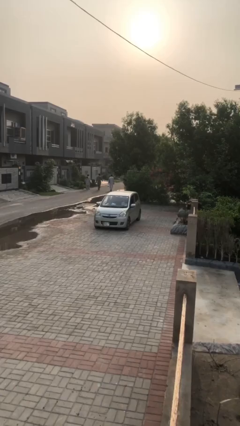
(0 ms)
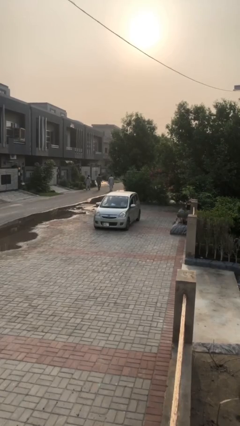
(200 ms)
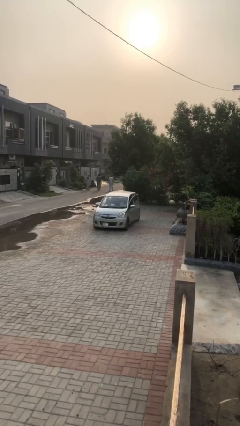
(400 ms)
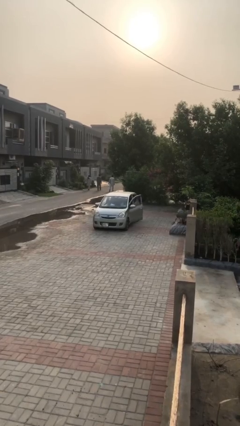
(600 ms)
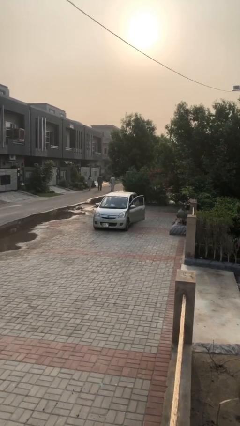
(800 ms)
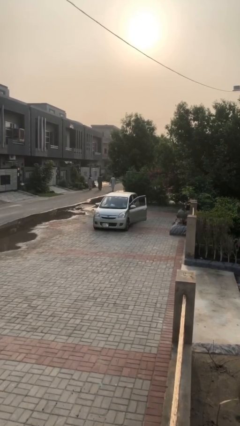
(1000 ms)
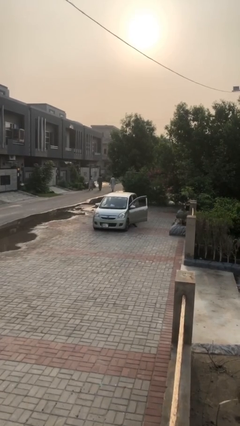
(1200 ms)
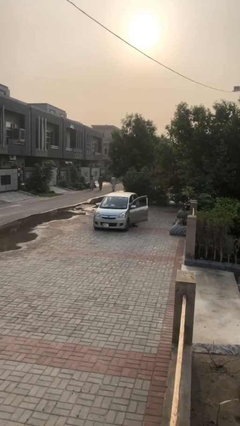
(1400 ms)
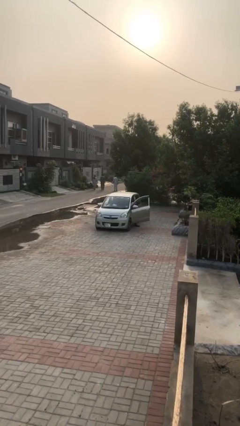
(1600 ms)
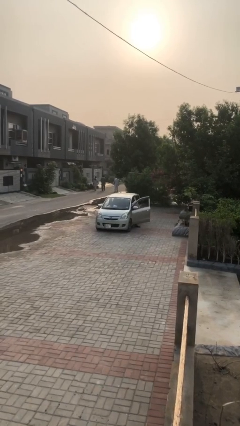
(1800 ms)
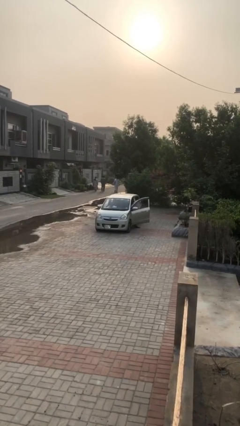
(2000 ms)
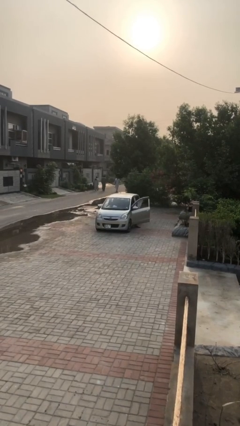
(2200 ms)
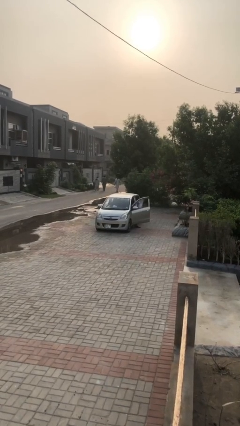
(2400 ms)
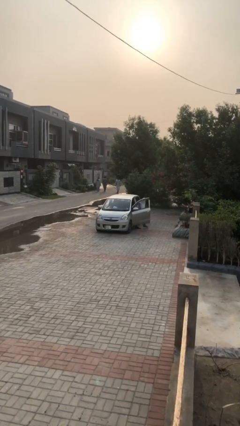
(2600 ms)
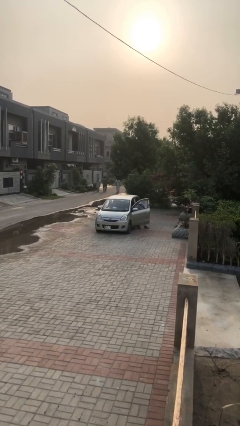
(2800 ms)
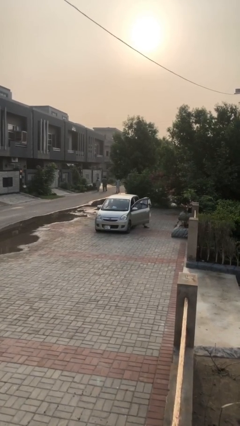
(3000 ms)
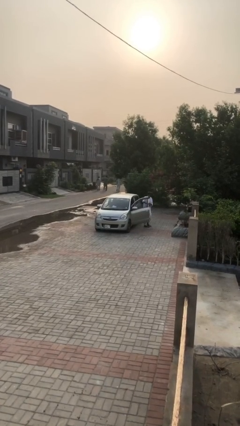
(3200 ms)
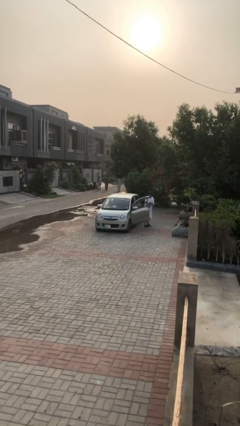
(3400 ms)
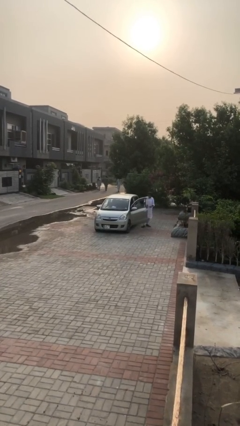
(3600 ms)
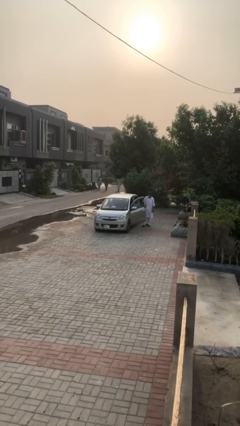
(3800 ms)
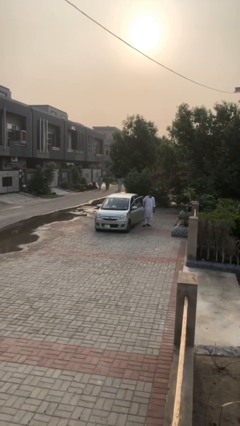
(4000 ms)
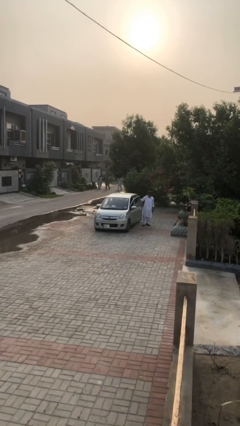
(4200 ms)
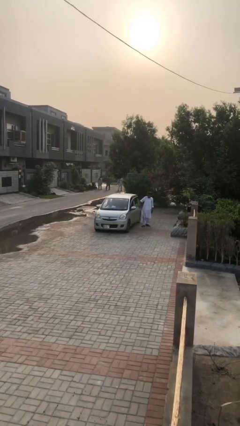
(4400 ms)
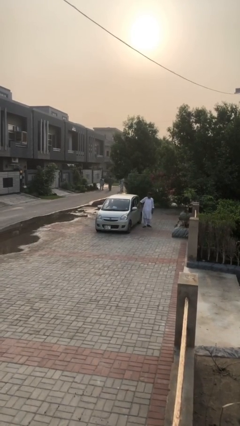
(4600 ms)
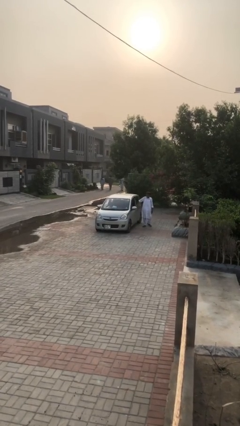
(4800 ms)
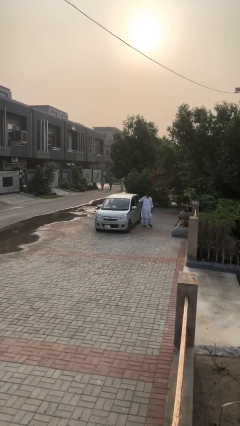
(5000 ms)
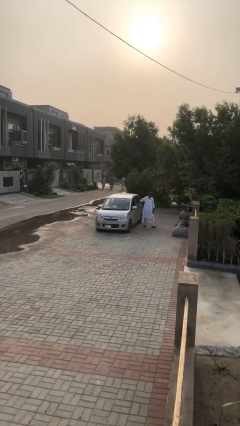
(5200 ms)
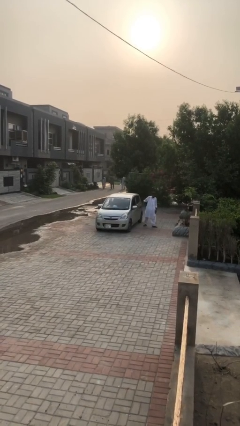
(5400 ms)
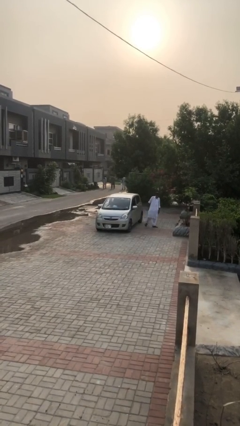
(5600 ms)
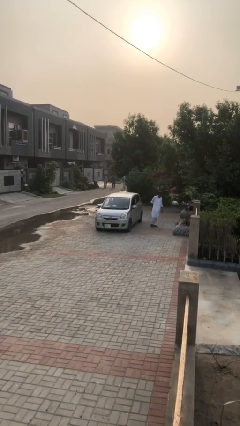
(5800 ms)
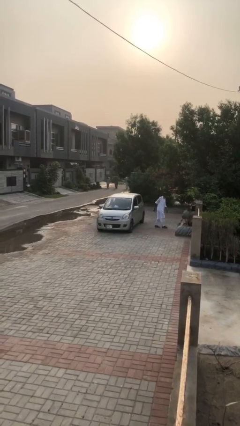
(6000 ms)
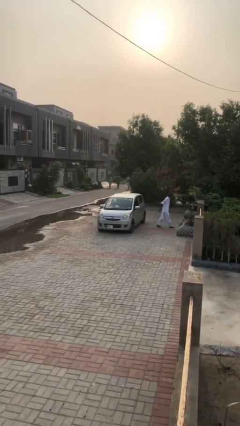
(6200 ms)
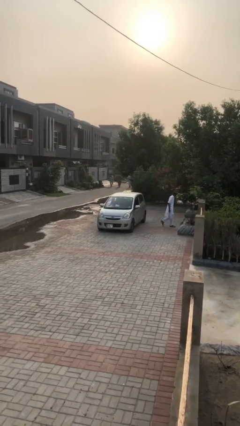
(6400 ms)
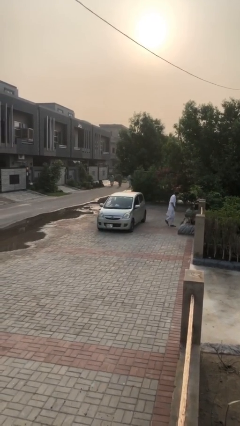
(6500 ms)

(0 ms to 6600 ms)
car drops off person

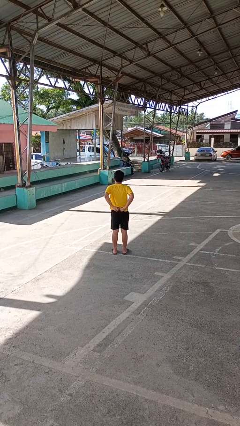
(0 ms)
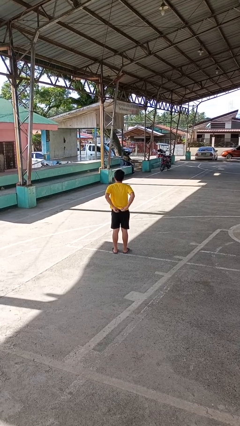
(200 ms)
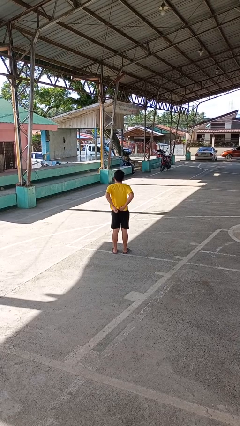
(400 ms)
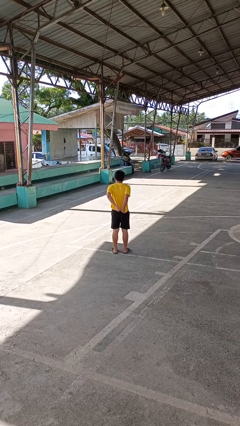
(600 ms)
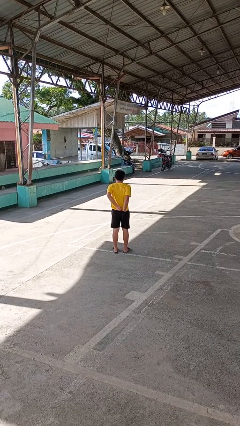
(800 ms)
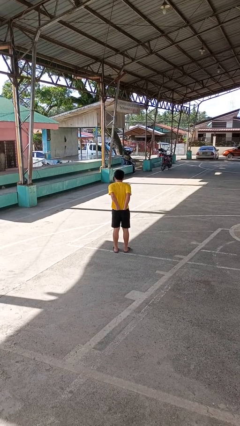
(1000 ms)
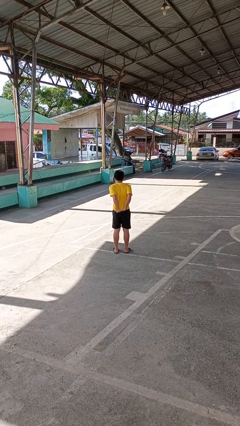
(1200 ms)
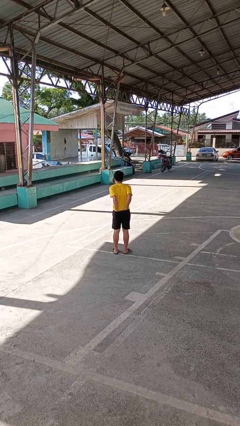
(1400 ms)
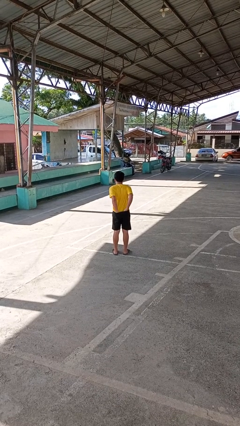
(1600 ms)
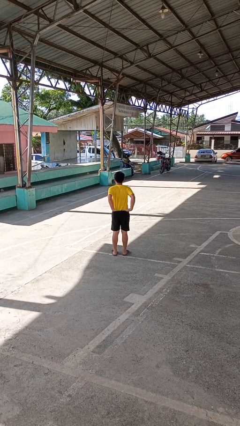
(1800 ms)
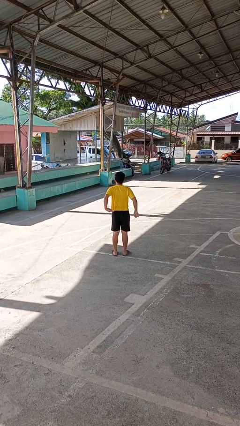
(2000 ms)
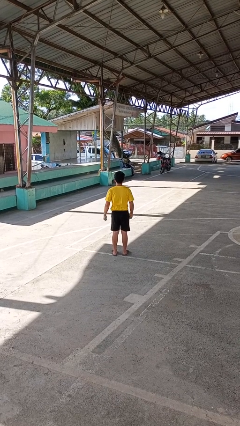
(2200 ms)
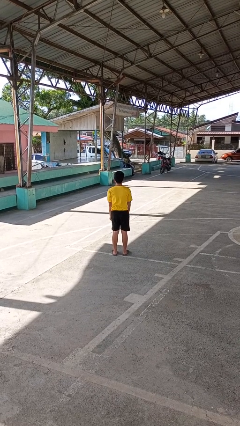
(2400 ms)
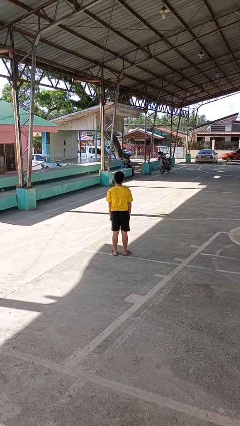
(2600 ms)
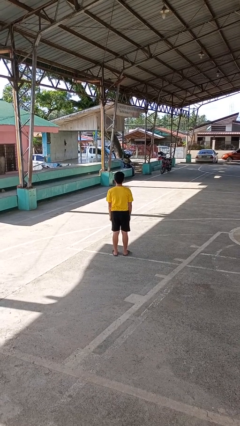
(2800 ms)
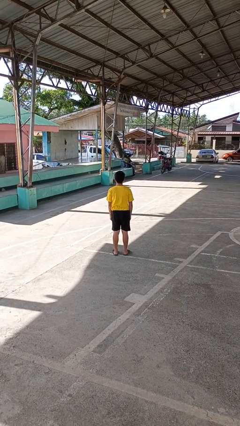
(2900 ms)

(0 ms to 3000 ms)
person tucks in shirt

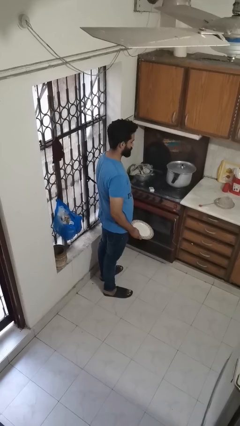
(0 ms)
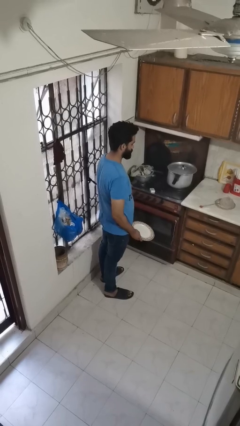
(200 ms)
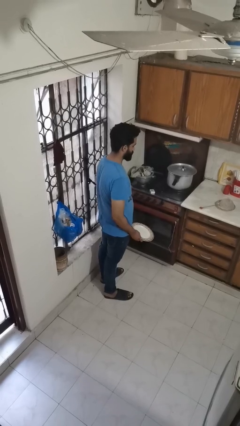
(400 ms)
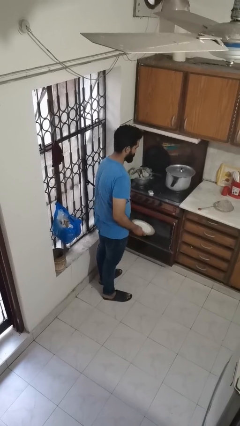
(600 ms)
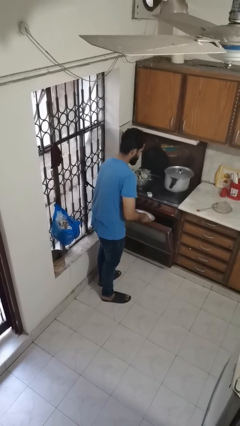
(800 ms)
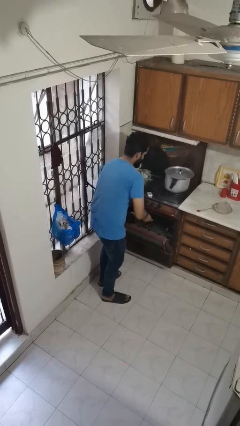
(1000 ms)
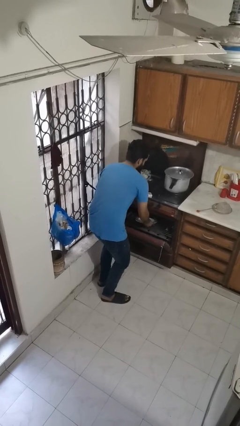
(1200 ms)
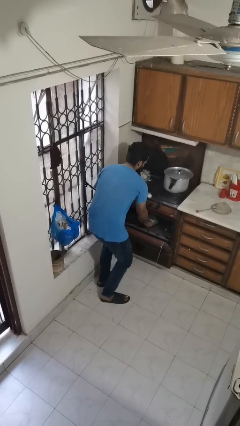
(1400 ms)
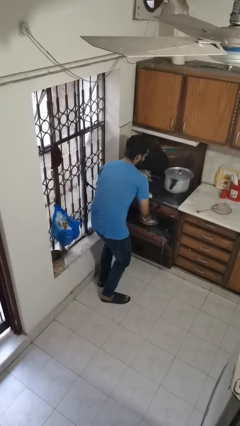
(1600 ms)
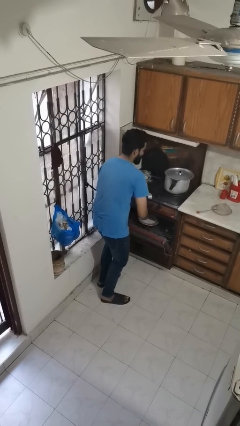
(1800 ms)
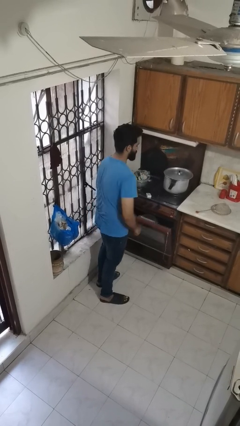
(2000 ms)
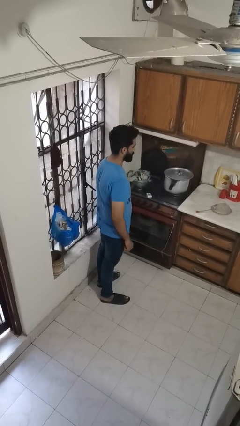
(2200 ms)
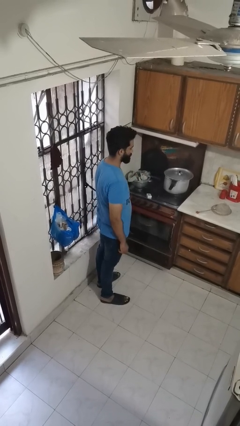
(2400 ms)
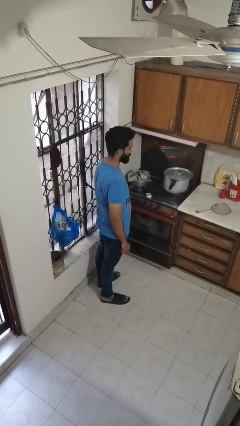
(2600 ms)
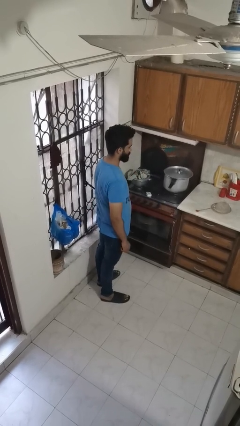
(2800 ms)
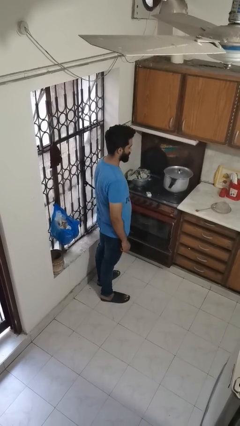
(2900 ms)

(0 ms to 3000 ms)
person puts object into oven

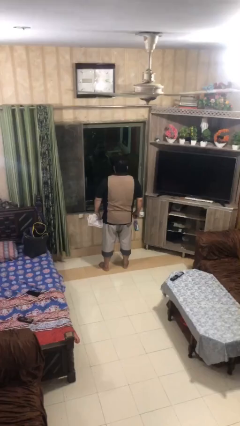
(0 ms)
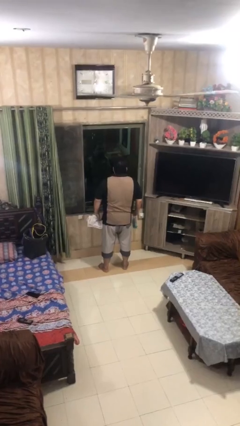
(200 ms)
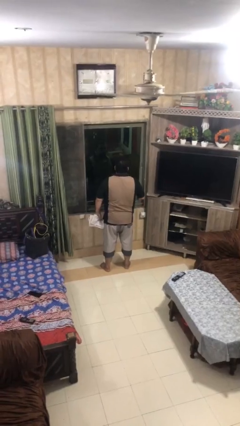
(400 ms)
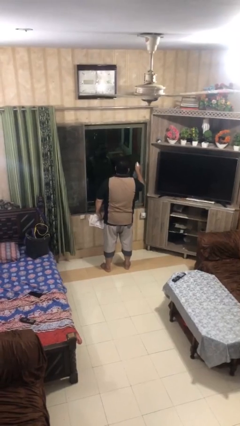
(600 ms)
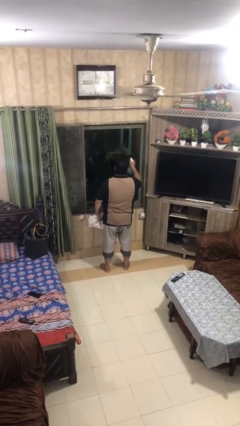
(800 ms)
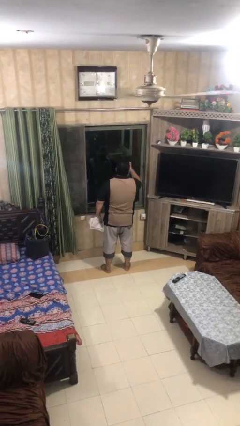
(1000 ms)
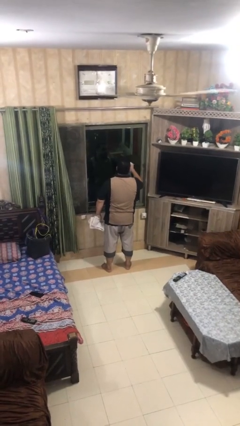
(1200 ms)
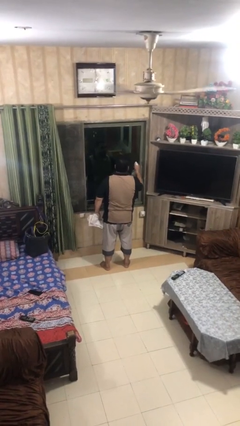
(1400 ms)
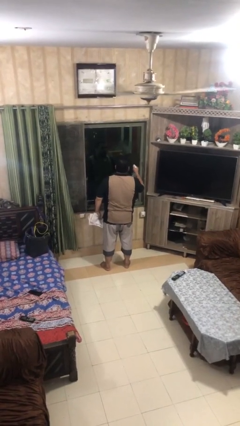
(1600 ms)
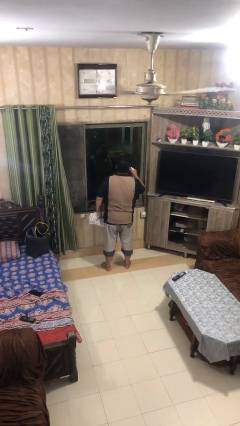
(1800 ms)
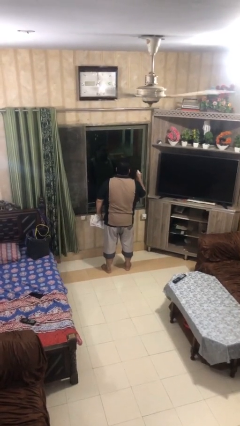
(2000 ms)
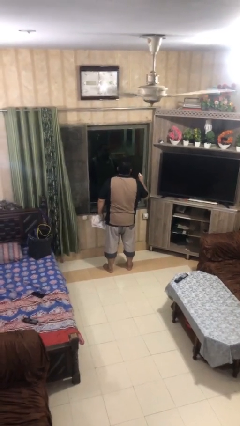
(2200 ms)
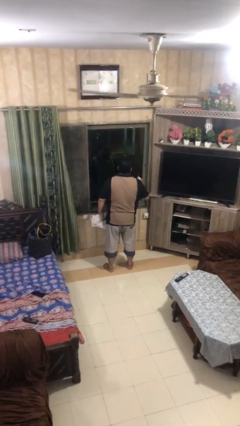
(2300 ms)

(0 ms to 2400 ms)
person sprays from bottle

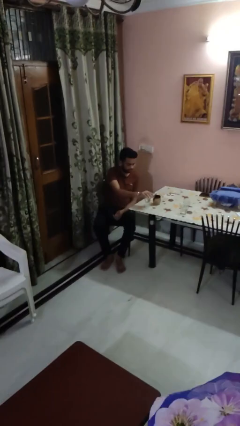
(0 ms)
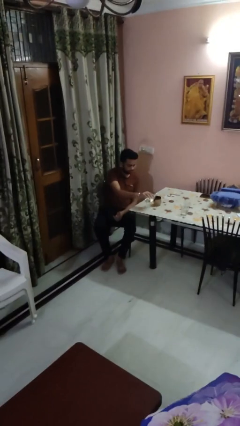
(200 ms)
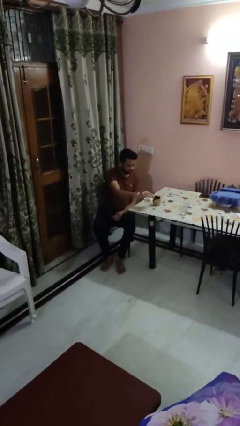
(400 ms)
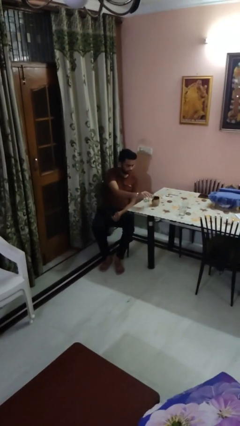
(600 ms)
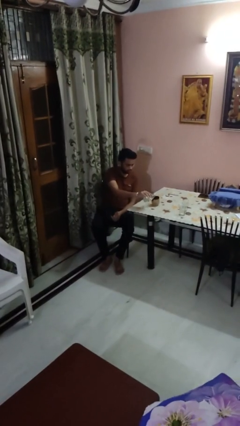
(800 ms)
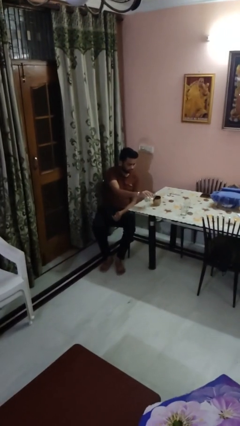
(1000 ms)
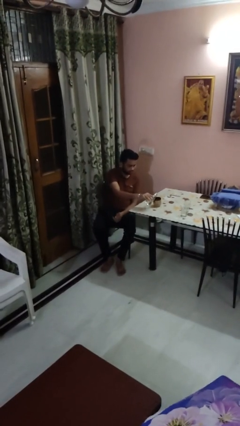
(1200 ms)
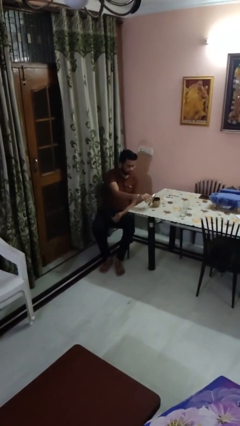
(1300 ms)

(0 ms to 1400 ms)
person pours liquid into cup

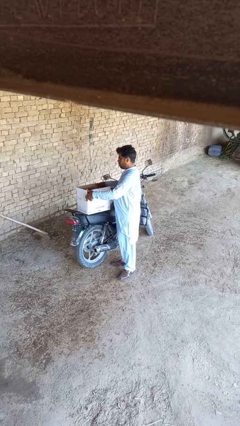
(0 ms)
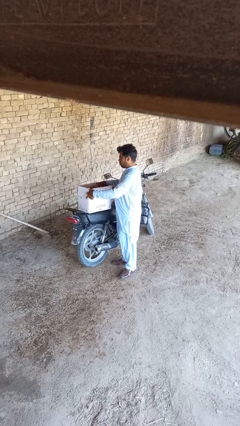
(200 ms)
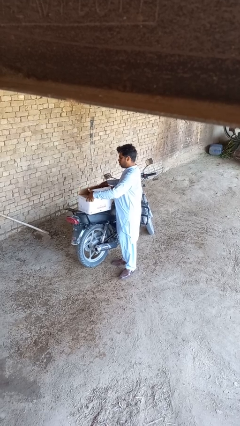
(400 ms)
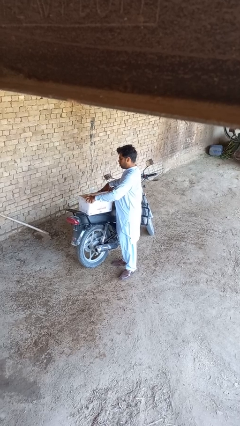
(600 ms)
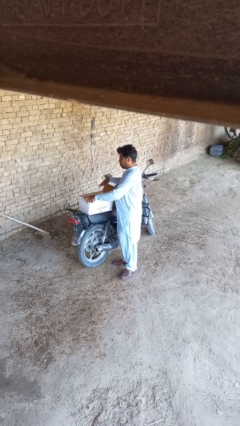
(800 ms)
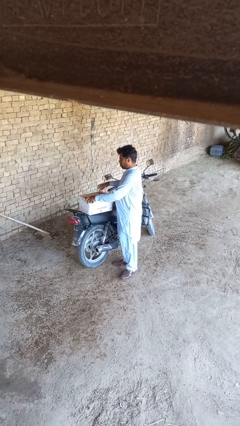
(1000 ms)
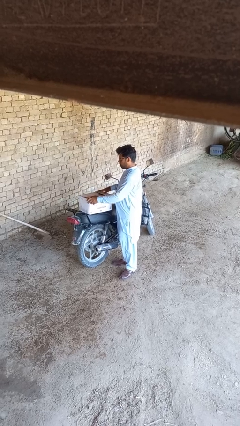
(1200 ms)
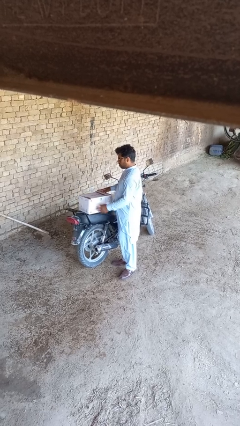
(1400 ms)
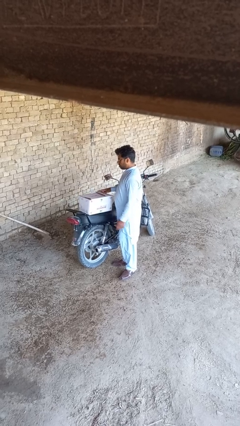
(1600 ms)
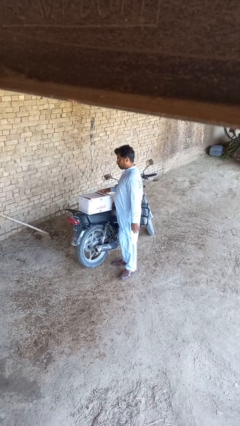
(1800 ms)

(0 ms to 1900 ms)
person closes box
